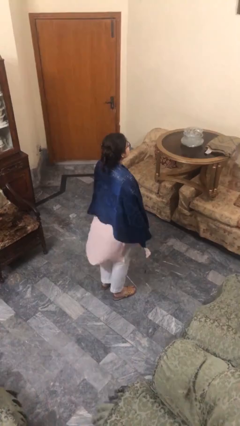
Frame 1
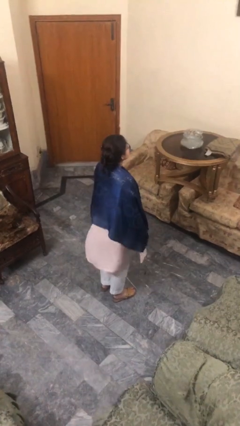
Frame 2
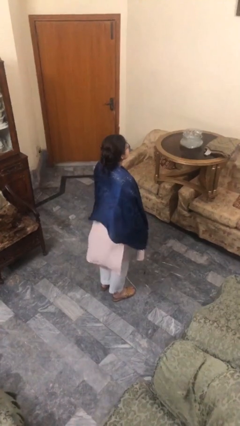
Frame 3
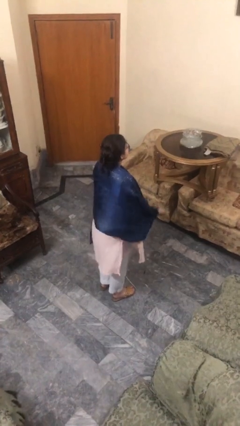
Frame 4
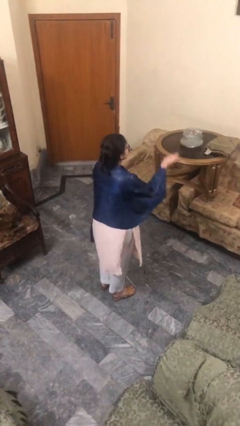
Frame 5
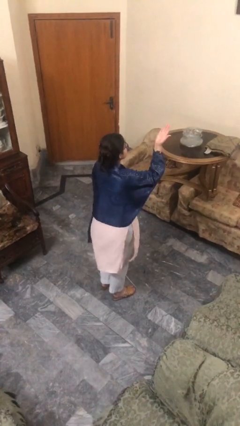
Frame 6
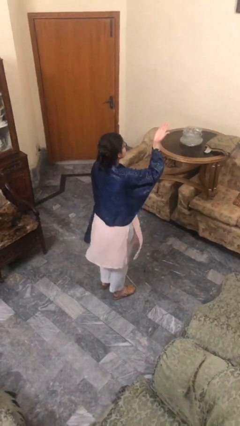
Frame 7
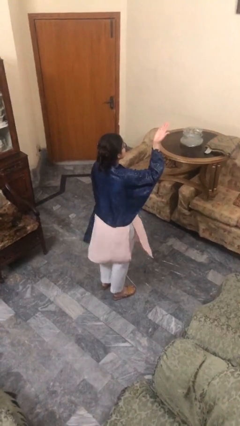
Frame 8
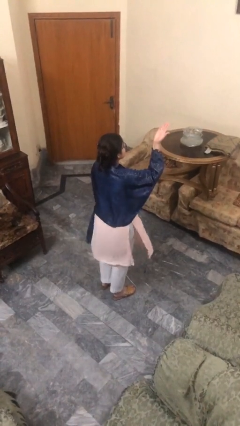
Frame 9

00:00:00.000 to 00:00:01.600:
person gestures swipe up

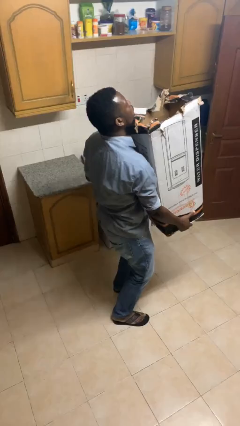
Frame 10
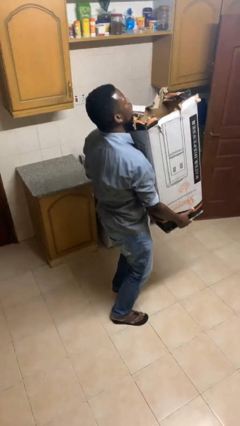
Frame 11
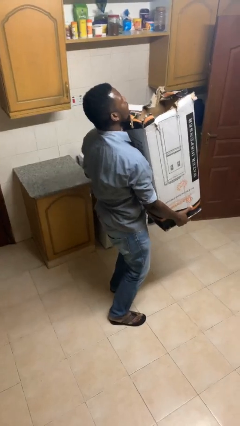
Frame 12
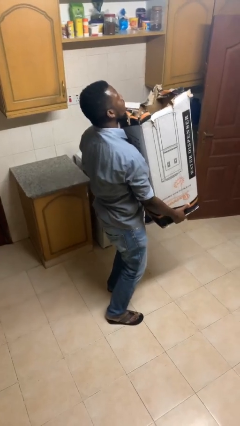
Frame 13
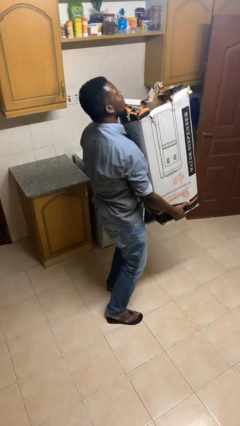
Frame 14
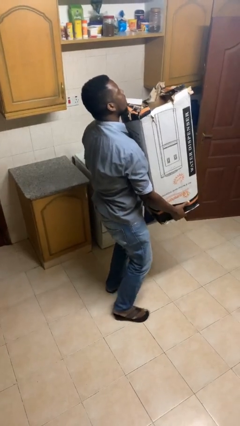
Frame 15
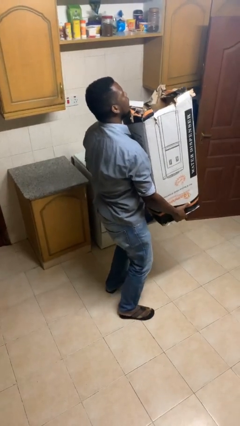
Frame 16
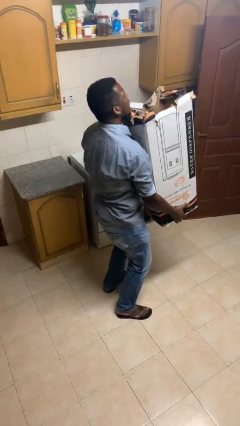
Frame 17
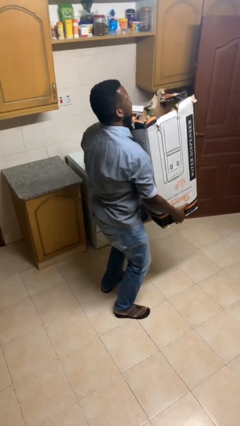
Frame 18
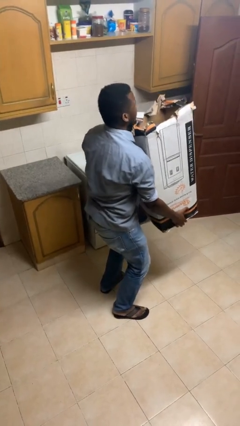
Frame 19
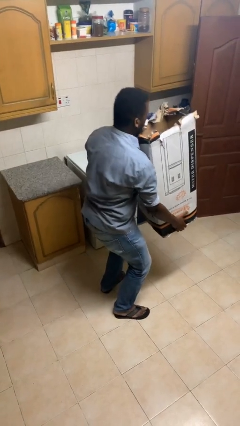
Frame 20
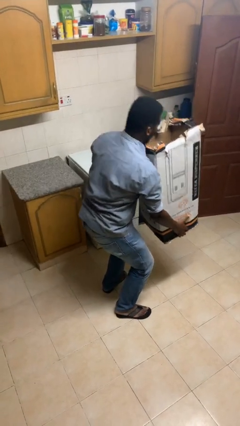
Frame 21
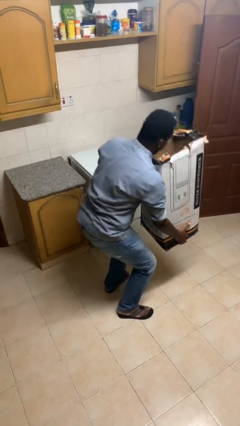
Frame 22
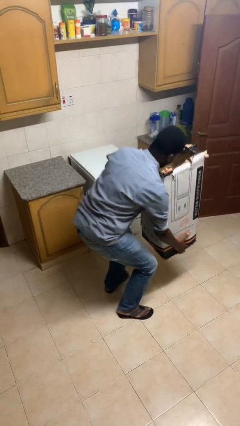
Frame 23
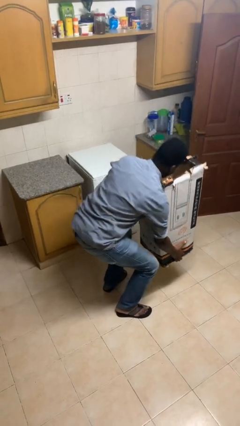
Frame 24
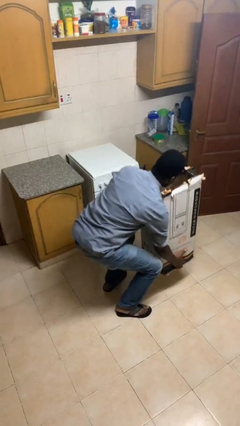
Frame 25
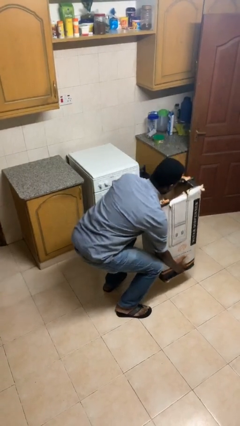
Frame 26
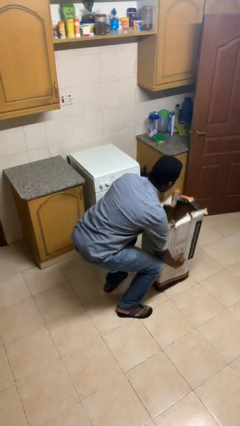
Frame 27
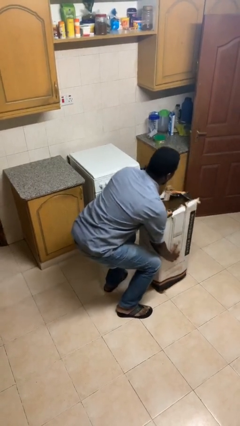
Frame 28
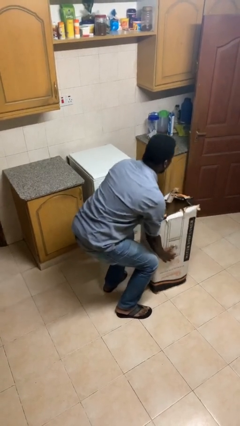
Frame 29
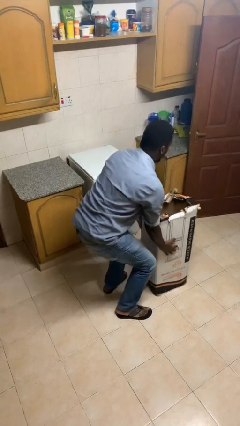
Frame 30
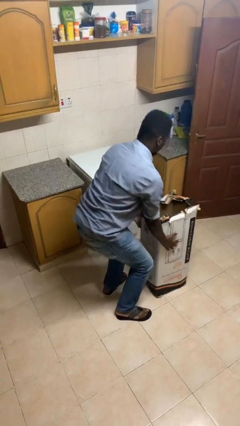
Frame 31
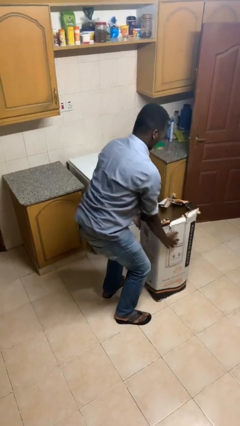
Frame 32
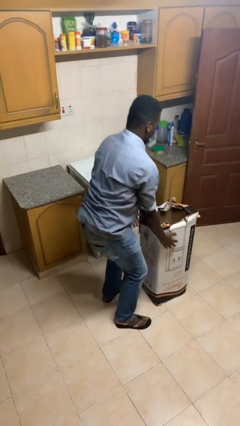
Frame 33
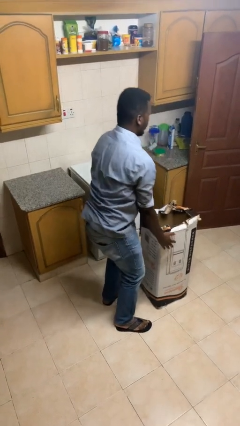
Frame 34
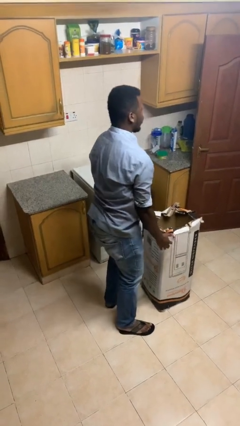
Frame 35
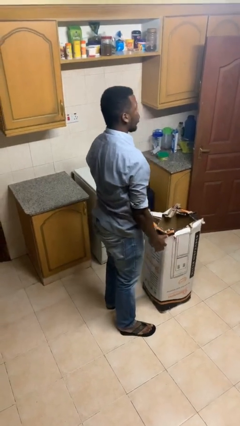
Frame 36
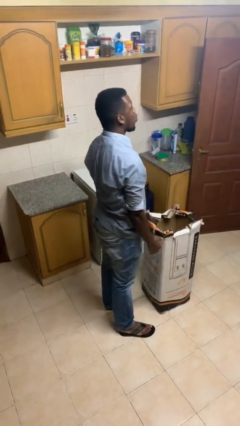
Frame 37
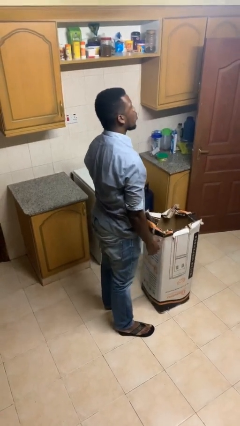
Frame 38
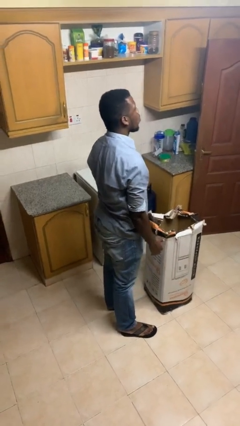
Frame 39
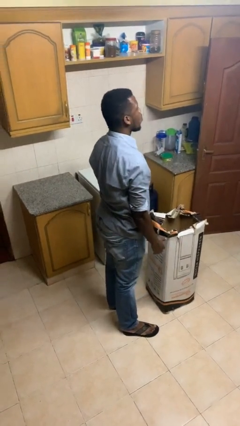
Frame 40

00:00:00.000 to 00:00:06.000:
person puts down object on floor

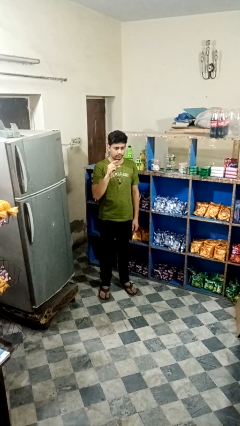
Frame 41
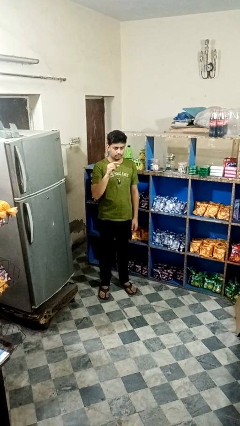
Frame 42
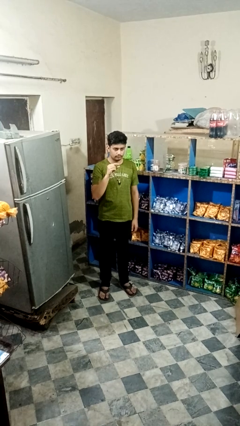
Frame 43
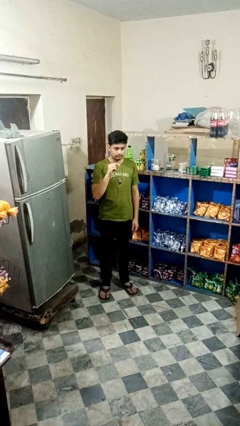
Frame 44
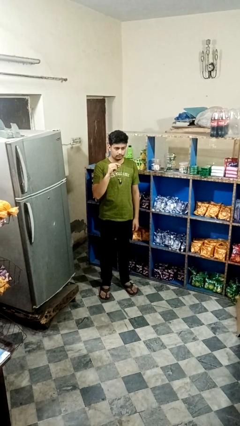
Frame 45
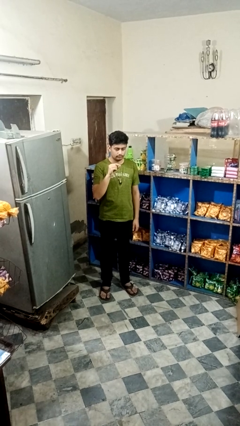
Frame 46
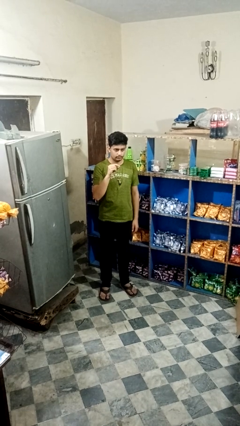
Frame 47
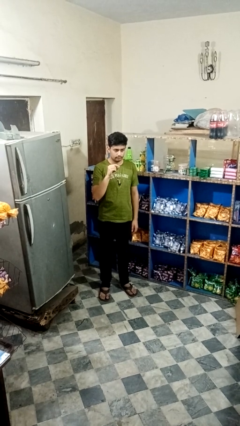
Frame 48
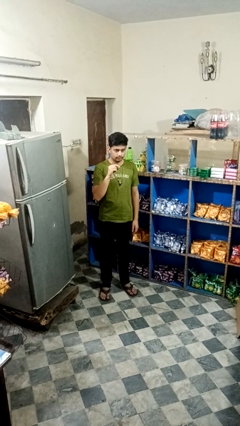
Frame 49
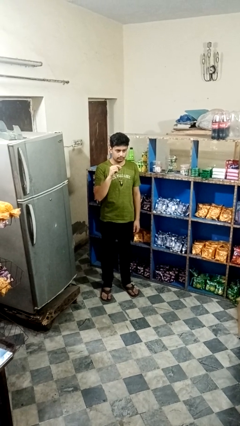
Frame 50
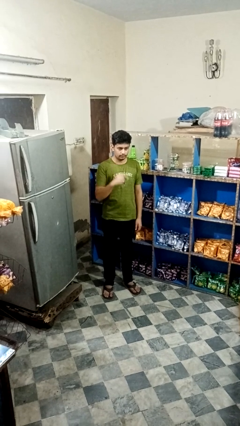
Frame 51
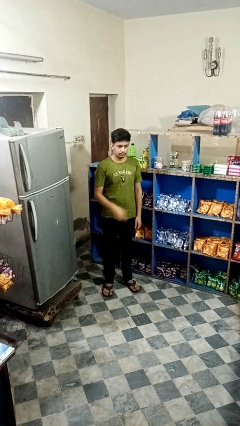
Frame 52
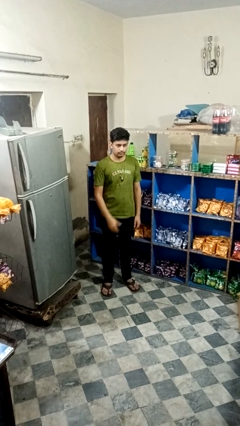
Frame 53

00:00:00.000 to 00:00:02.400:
person gestures zoom out

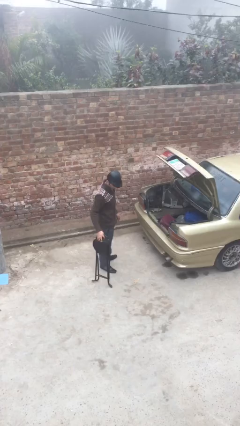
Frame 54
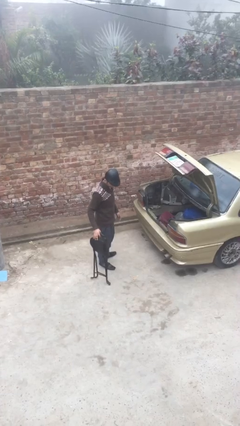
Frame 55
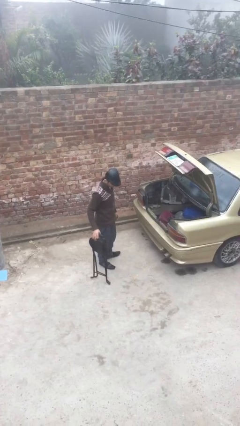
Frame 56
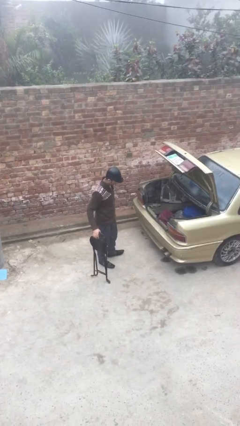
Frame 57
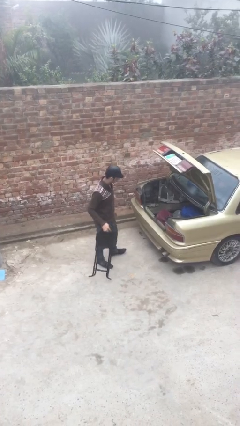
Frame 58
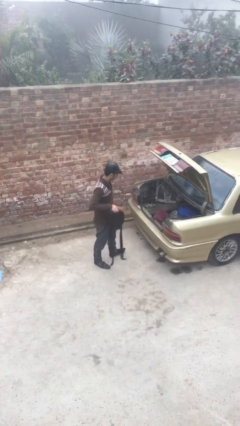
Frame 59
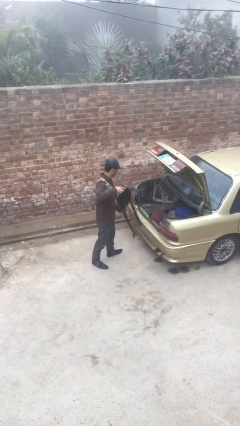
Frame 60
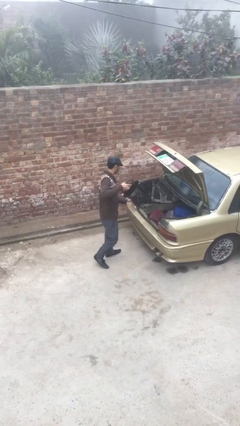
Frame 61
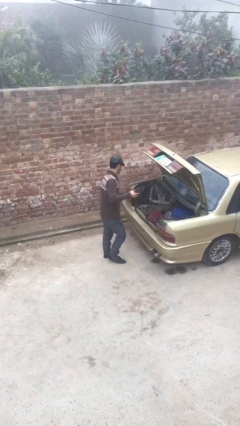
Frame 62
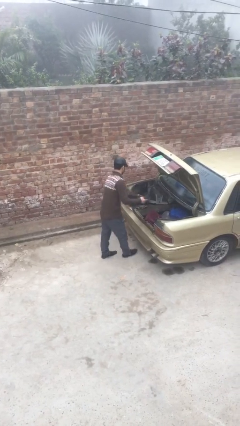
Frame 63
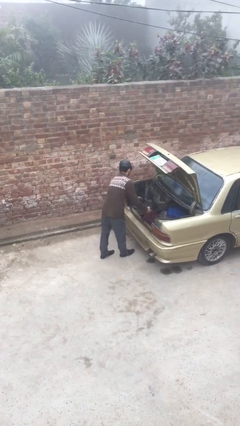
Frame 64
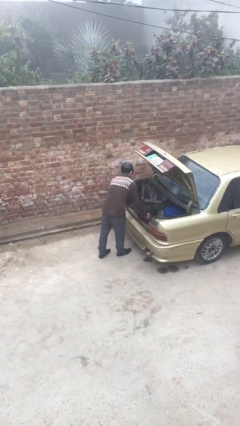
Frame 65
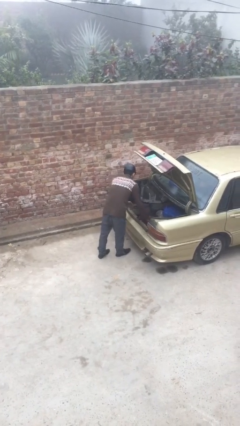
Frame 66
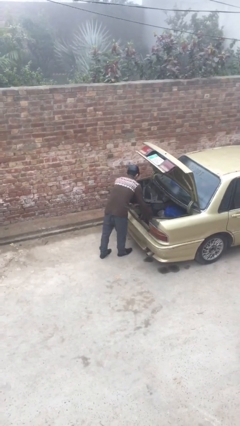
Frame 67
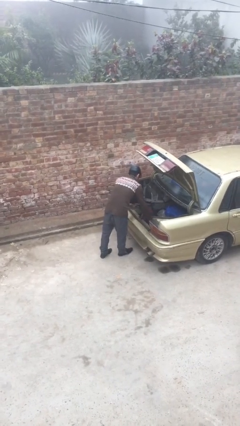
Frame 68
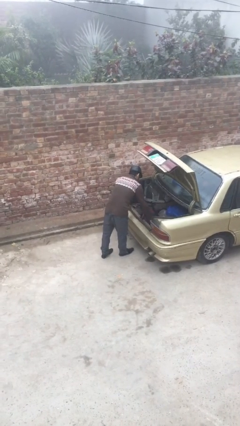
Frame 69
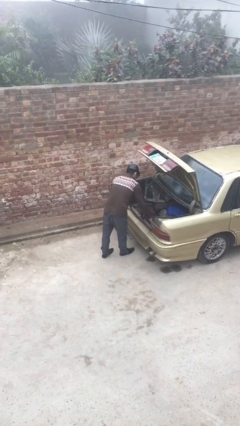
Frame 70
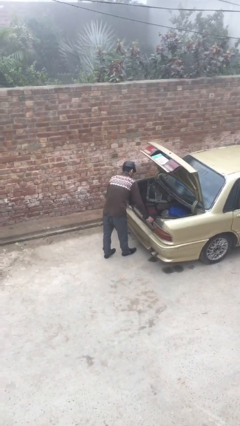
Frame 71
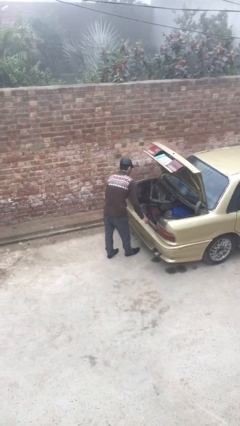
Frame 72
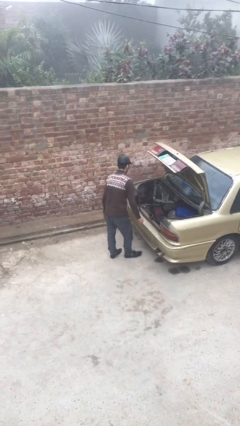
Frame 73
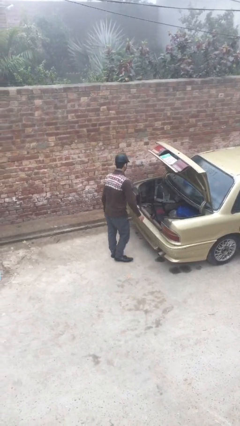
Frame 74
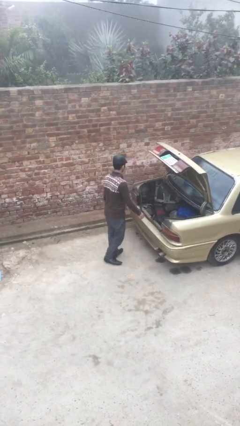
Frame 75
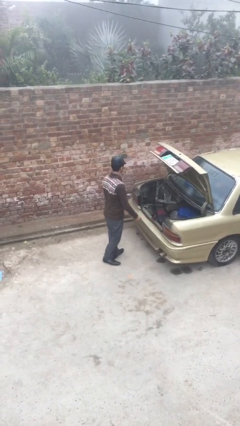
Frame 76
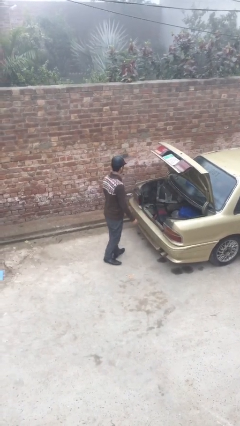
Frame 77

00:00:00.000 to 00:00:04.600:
person loads car

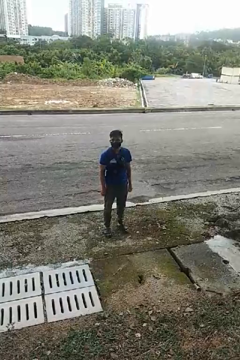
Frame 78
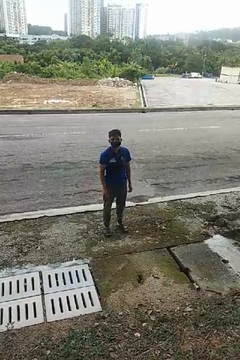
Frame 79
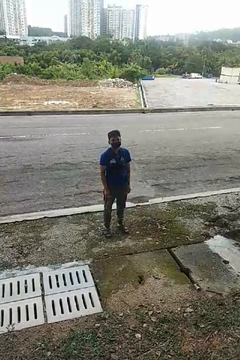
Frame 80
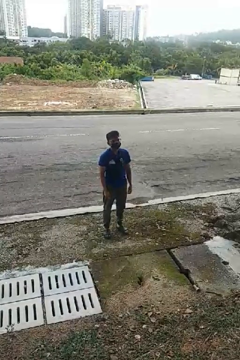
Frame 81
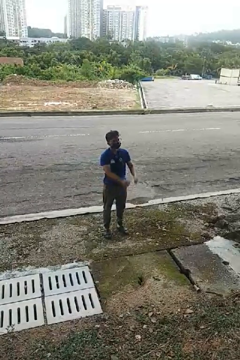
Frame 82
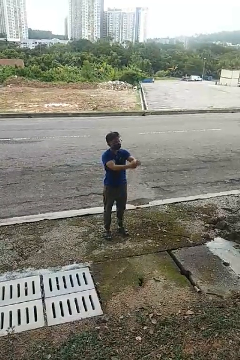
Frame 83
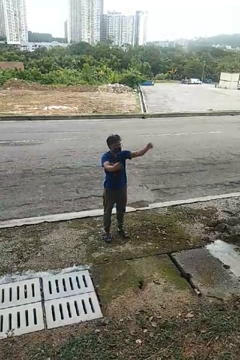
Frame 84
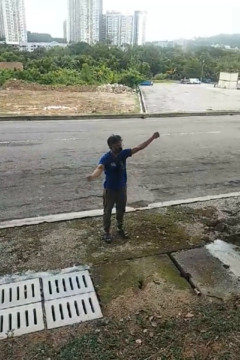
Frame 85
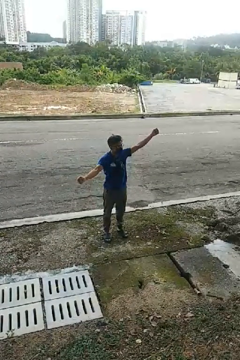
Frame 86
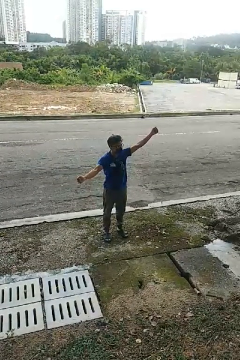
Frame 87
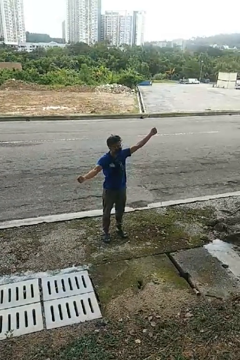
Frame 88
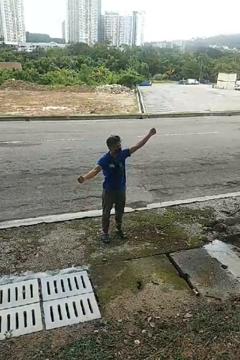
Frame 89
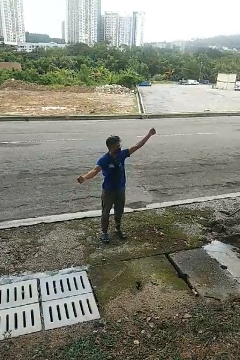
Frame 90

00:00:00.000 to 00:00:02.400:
person gestures zoom in

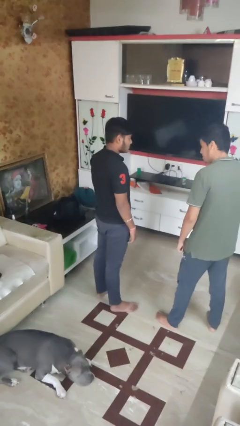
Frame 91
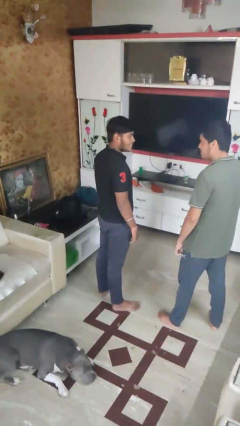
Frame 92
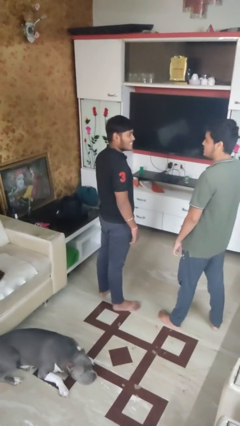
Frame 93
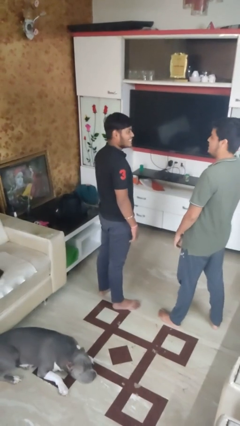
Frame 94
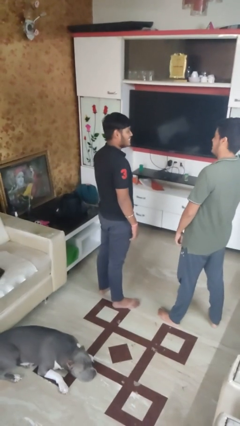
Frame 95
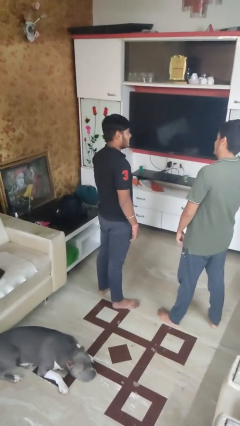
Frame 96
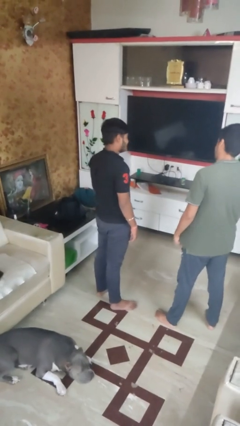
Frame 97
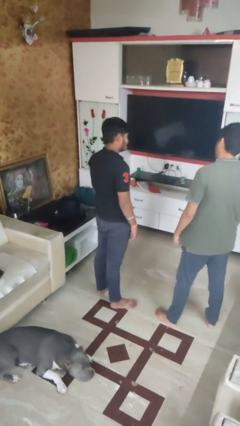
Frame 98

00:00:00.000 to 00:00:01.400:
person laughs with person
